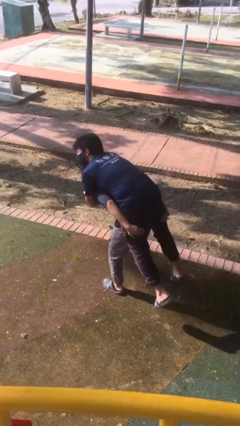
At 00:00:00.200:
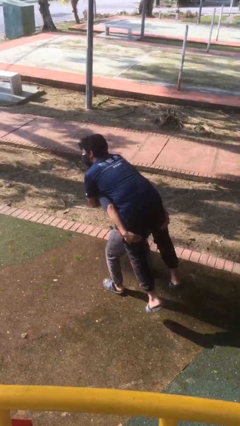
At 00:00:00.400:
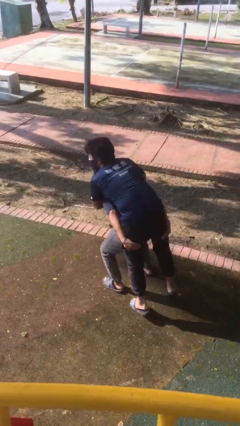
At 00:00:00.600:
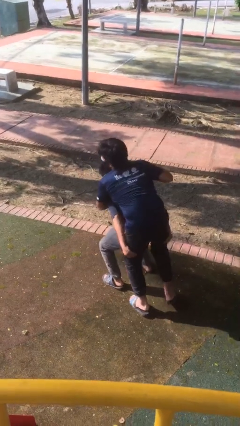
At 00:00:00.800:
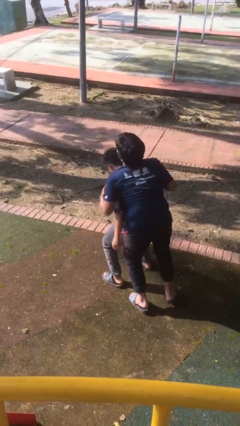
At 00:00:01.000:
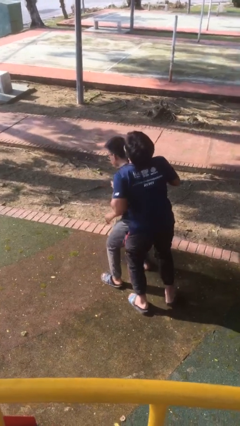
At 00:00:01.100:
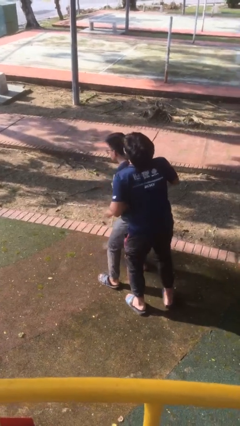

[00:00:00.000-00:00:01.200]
person puts down person

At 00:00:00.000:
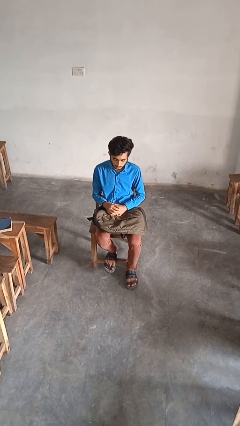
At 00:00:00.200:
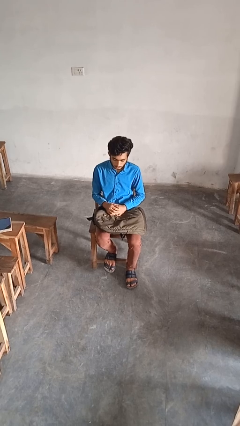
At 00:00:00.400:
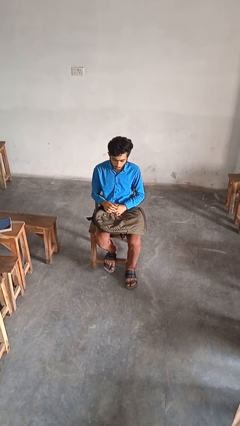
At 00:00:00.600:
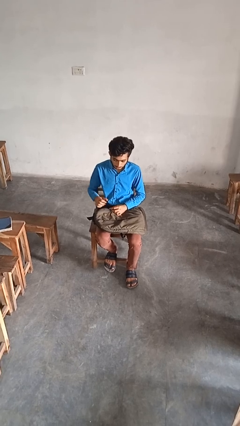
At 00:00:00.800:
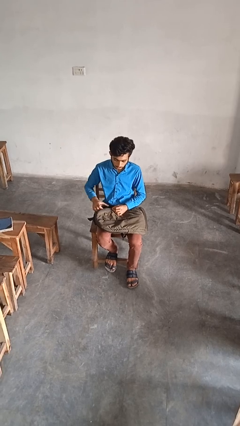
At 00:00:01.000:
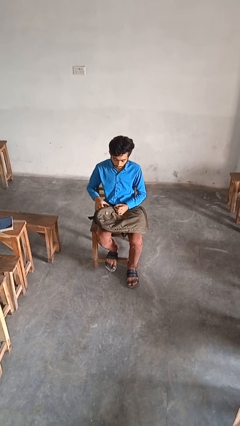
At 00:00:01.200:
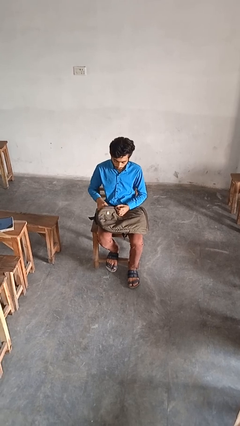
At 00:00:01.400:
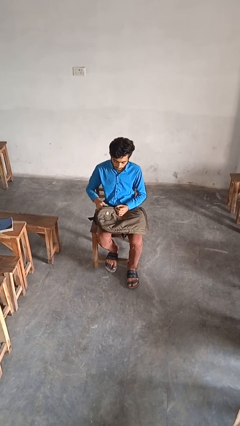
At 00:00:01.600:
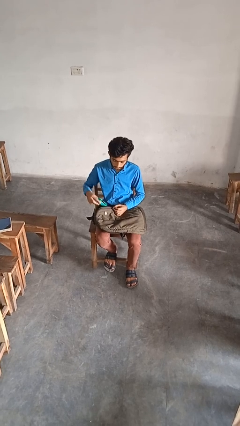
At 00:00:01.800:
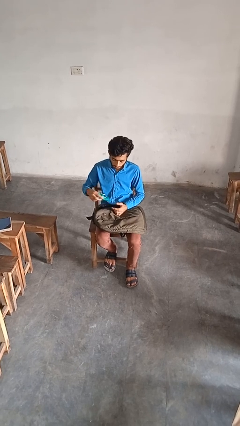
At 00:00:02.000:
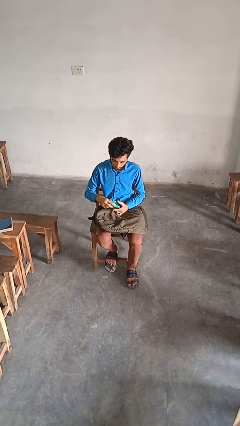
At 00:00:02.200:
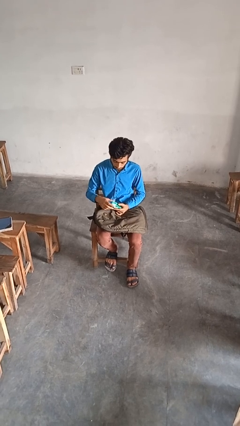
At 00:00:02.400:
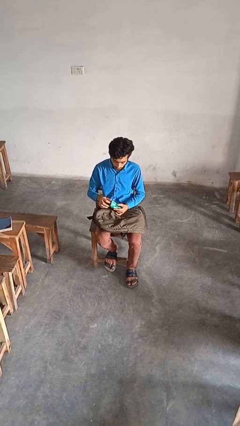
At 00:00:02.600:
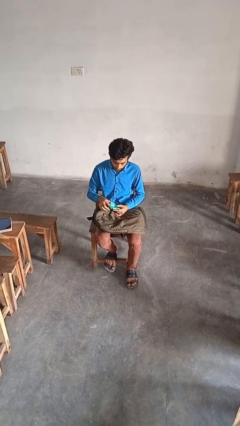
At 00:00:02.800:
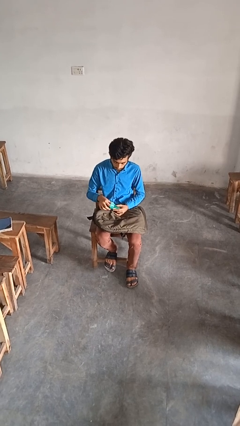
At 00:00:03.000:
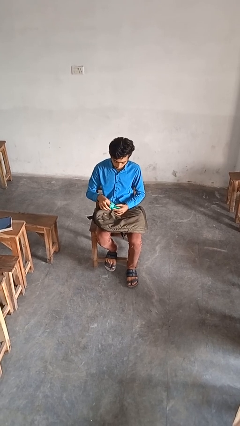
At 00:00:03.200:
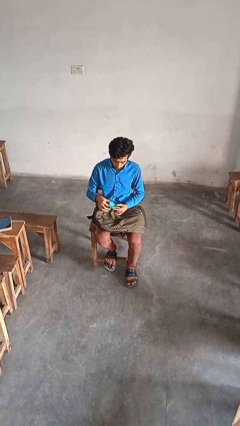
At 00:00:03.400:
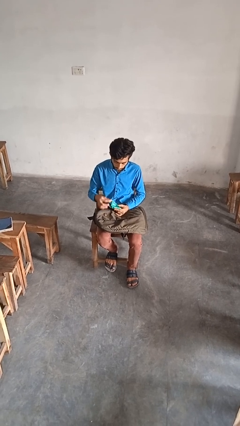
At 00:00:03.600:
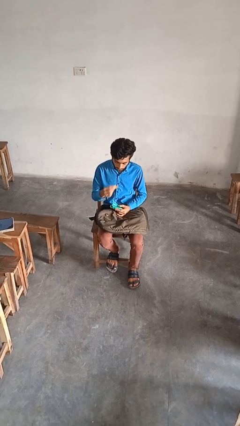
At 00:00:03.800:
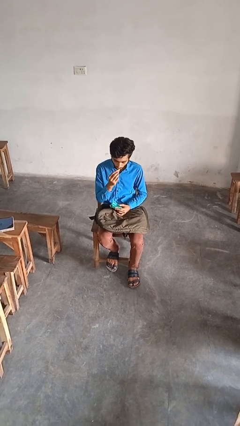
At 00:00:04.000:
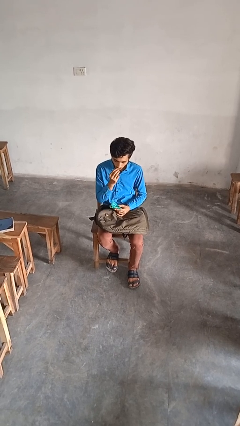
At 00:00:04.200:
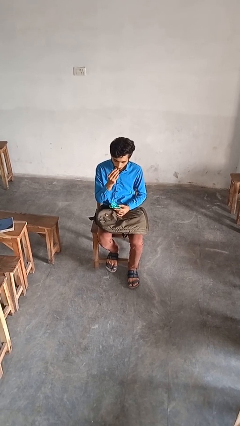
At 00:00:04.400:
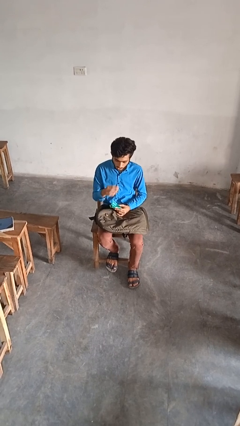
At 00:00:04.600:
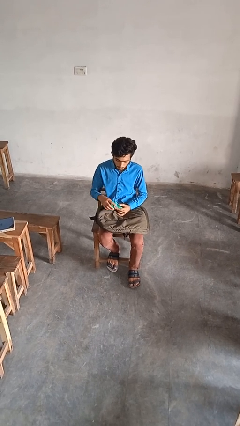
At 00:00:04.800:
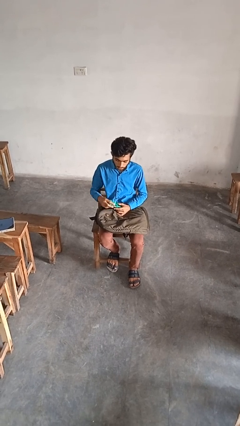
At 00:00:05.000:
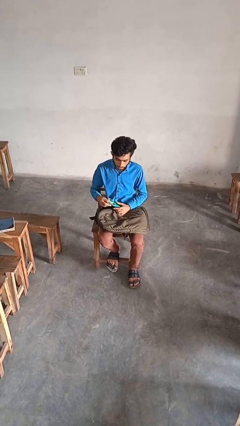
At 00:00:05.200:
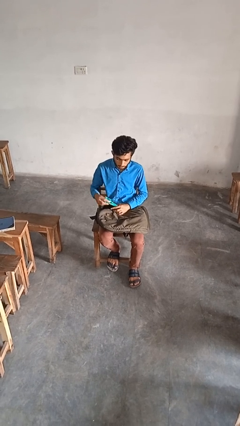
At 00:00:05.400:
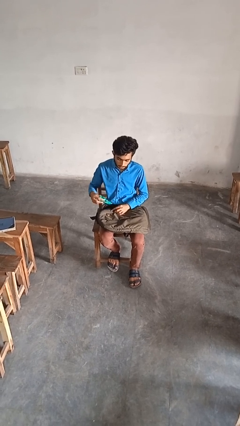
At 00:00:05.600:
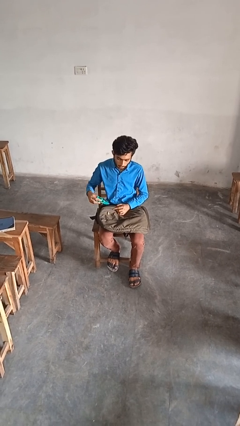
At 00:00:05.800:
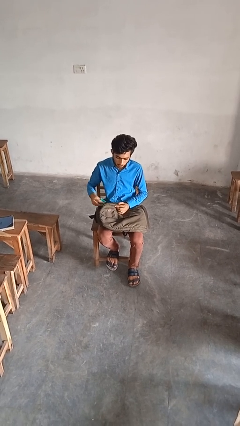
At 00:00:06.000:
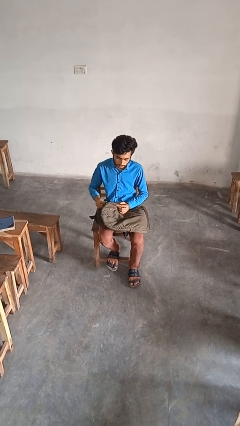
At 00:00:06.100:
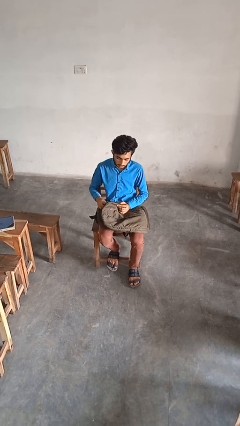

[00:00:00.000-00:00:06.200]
person eats snack from bag

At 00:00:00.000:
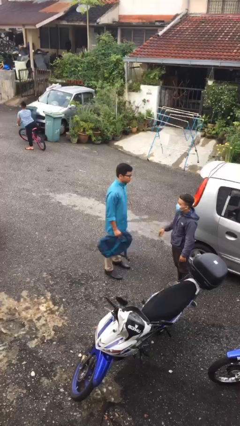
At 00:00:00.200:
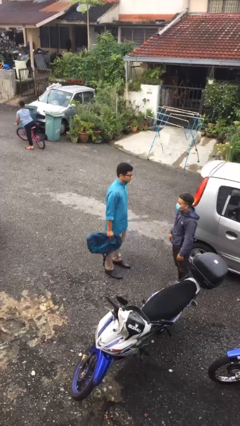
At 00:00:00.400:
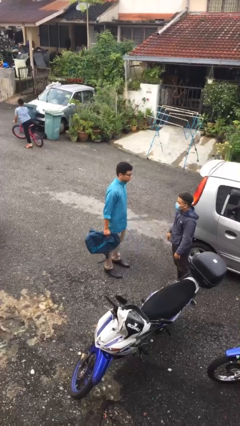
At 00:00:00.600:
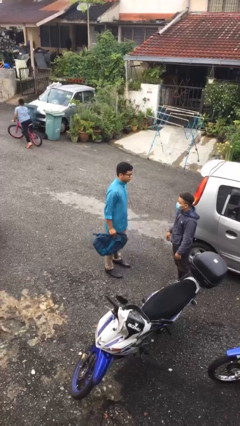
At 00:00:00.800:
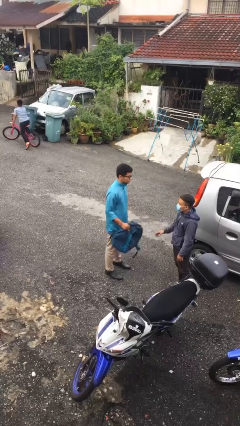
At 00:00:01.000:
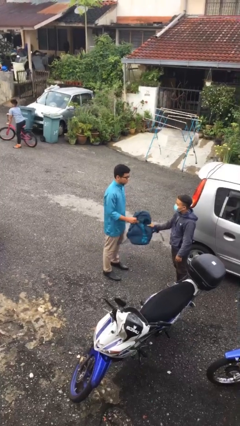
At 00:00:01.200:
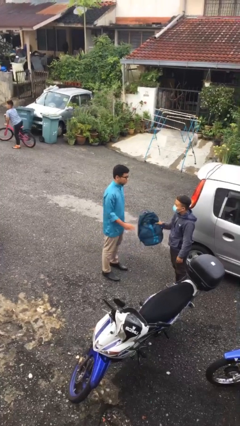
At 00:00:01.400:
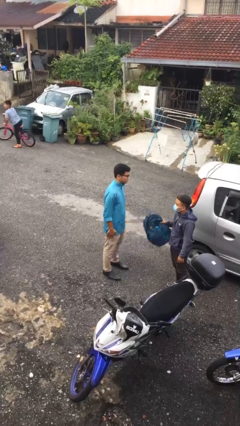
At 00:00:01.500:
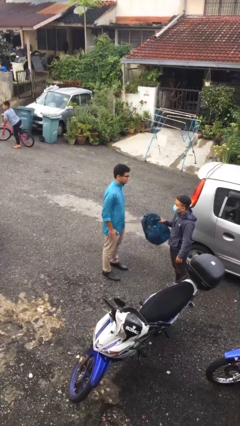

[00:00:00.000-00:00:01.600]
person transfers object to person

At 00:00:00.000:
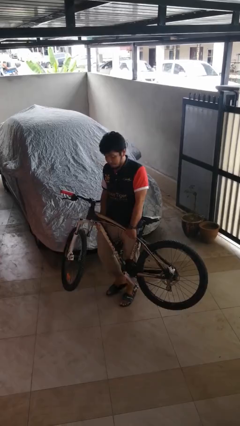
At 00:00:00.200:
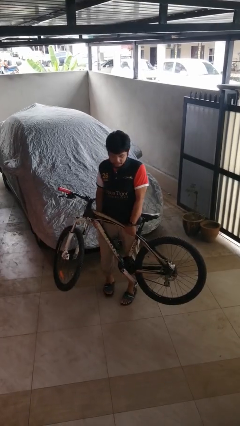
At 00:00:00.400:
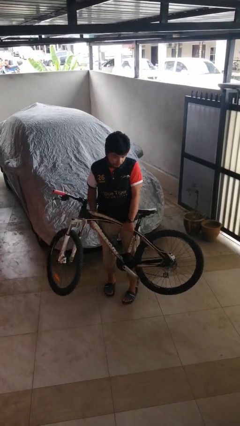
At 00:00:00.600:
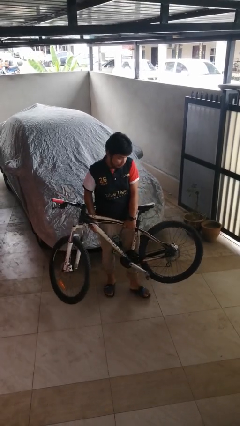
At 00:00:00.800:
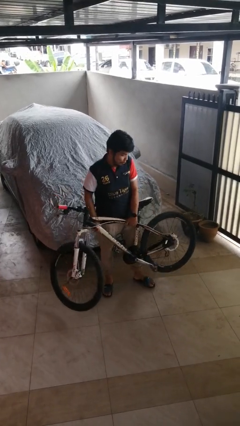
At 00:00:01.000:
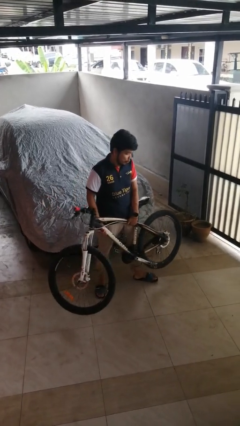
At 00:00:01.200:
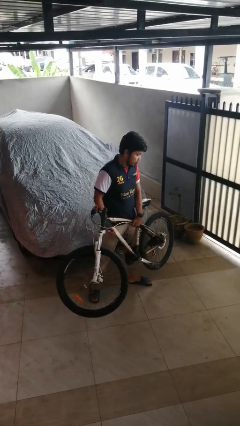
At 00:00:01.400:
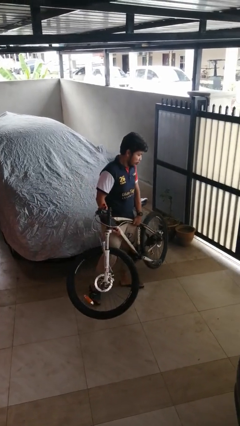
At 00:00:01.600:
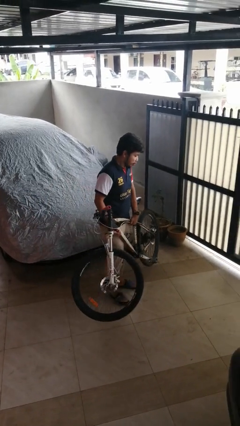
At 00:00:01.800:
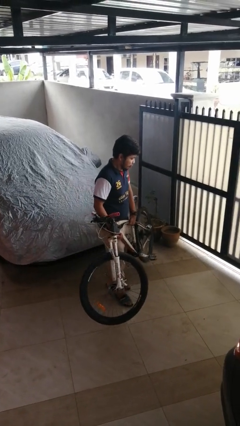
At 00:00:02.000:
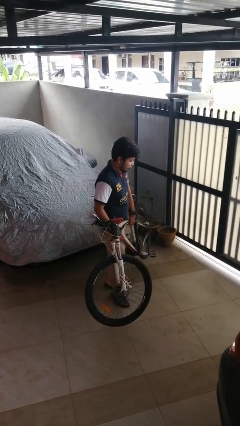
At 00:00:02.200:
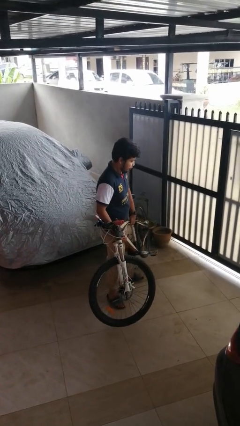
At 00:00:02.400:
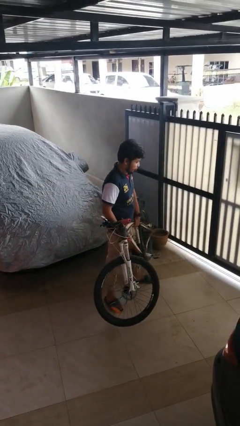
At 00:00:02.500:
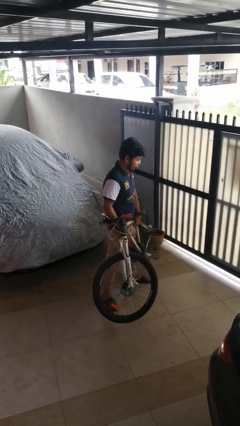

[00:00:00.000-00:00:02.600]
person carries bicycle

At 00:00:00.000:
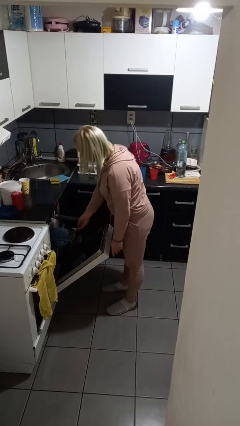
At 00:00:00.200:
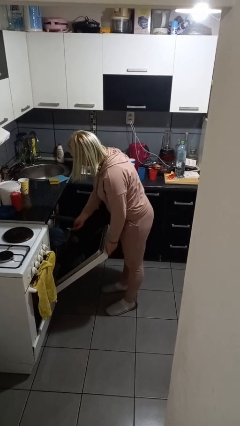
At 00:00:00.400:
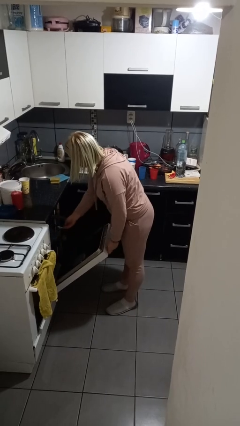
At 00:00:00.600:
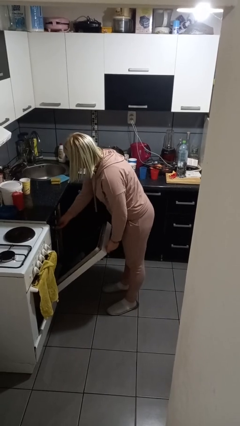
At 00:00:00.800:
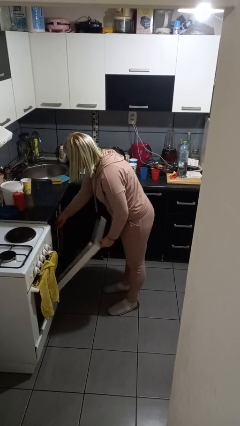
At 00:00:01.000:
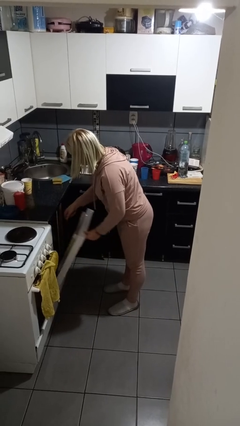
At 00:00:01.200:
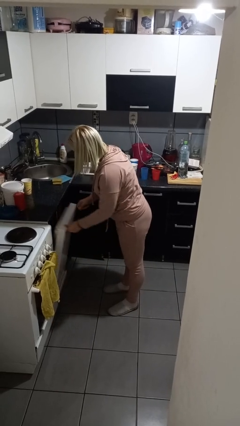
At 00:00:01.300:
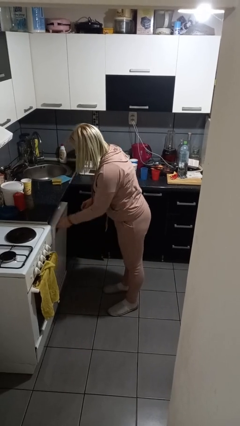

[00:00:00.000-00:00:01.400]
person closes dishwasher

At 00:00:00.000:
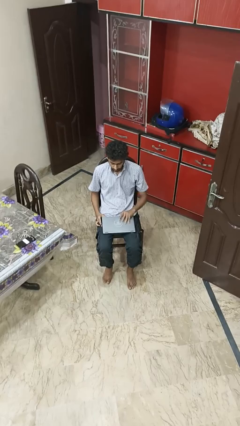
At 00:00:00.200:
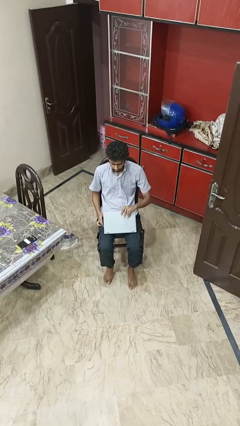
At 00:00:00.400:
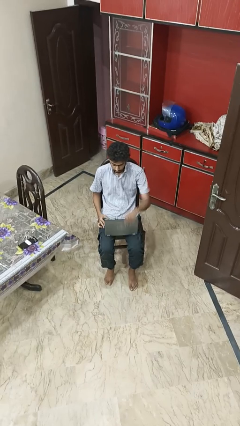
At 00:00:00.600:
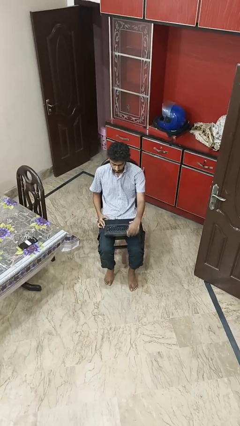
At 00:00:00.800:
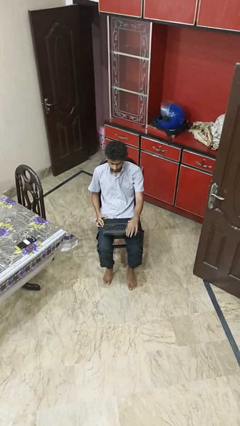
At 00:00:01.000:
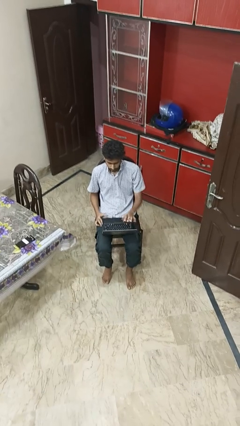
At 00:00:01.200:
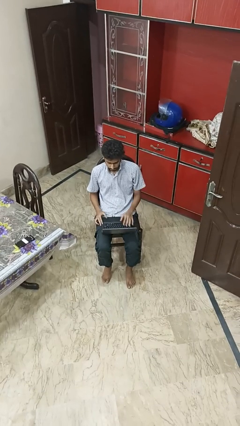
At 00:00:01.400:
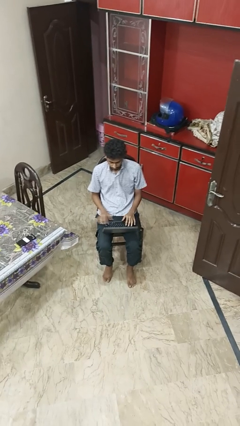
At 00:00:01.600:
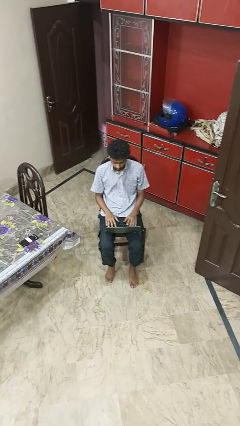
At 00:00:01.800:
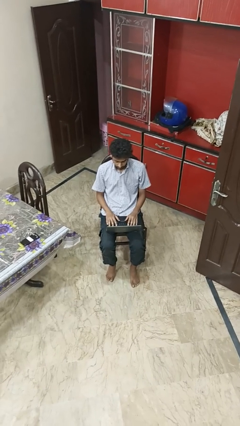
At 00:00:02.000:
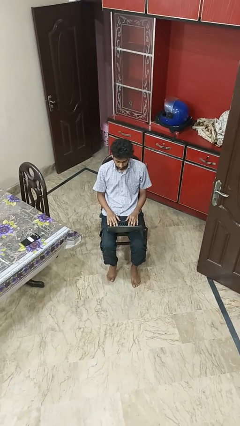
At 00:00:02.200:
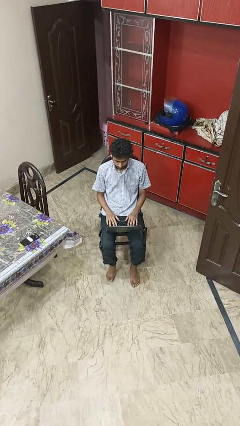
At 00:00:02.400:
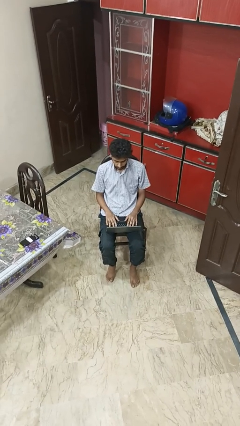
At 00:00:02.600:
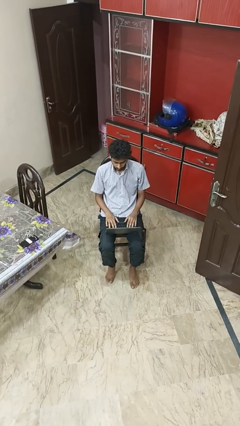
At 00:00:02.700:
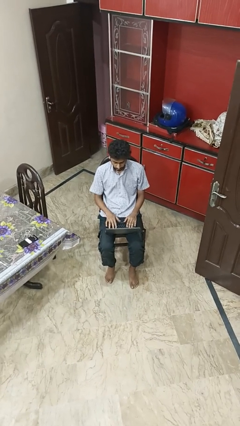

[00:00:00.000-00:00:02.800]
person opens laptop

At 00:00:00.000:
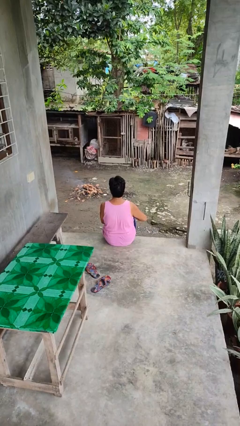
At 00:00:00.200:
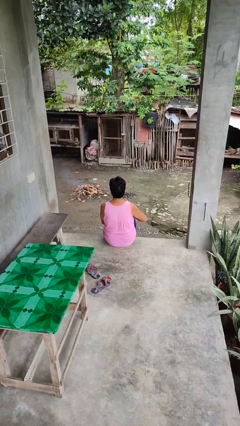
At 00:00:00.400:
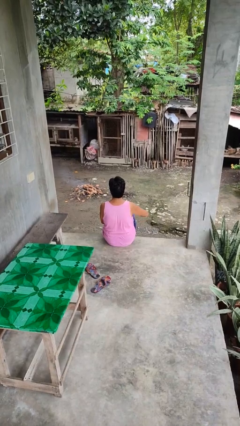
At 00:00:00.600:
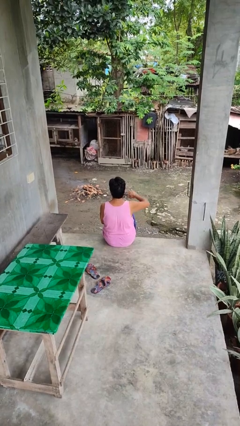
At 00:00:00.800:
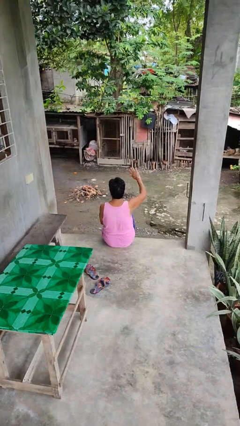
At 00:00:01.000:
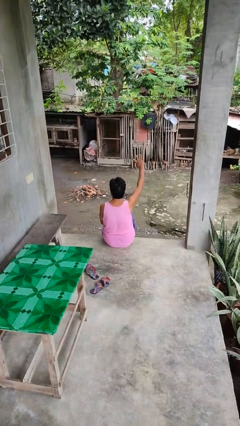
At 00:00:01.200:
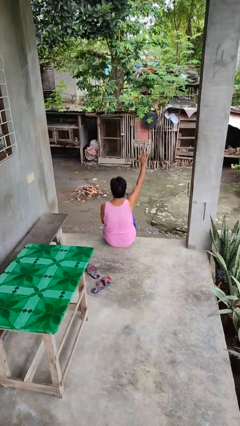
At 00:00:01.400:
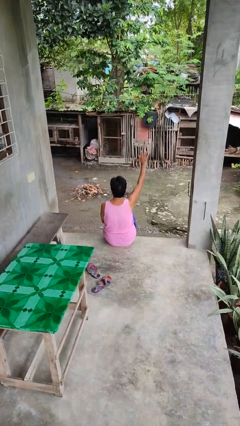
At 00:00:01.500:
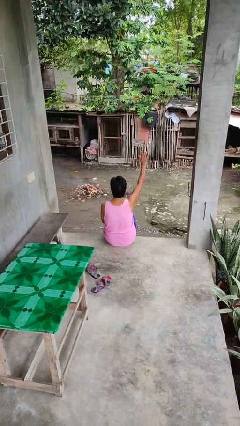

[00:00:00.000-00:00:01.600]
person gestures swipe up
